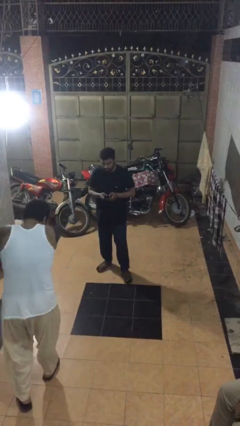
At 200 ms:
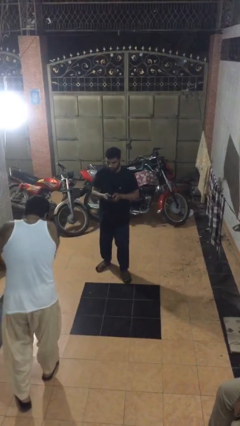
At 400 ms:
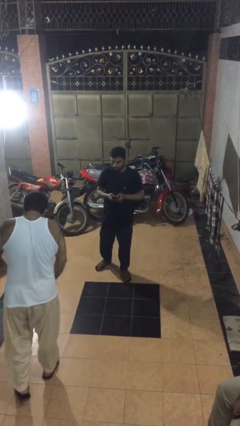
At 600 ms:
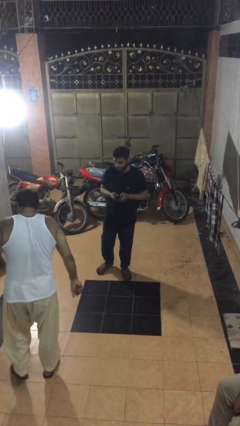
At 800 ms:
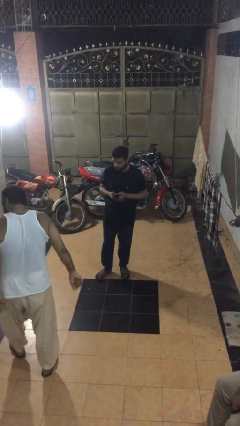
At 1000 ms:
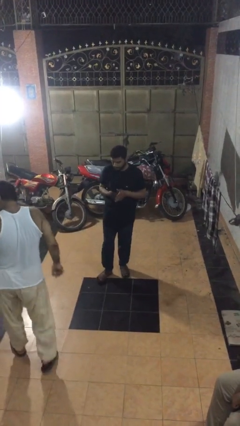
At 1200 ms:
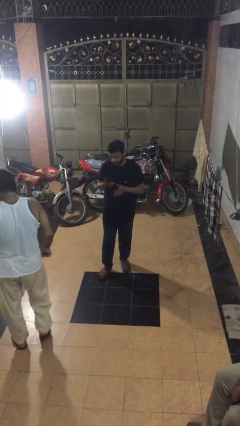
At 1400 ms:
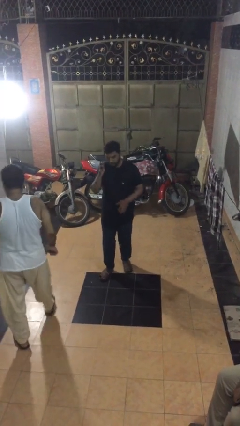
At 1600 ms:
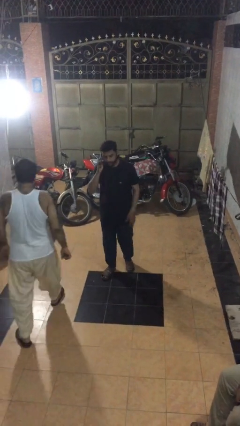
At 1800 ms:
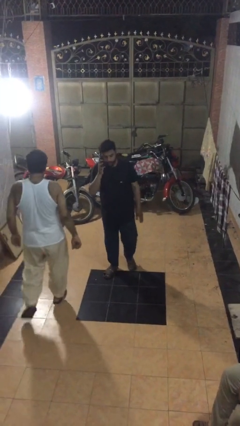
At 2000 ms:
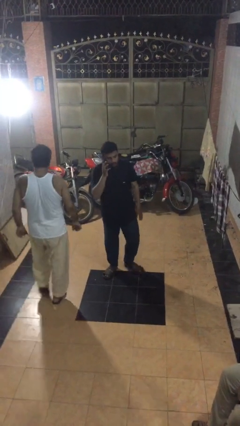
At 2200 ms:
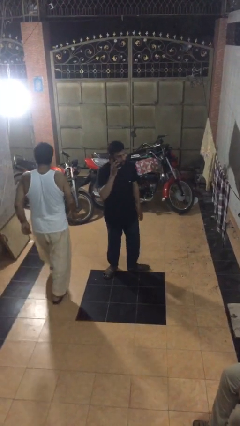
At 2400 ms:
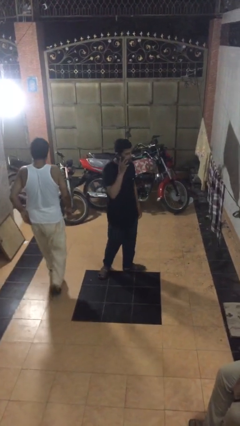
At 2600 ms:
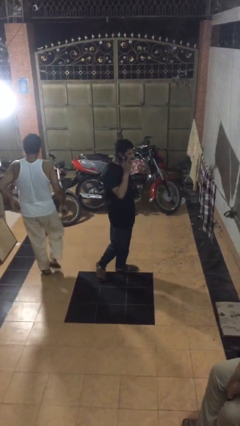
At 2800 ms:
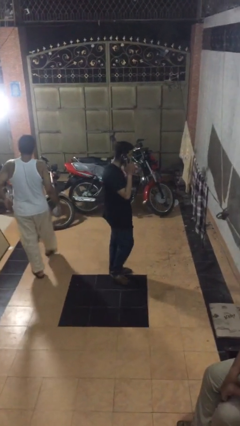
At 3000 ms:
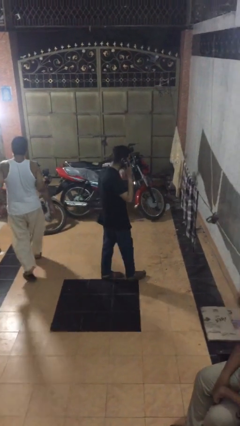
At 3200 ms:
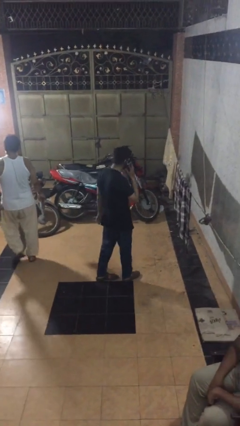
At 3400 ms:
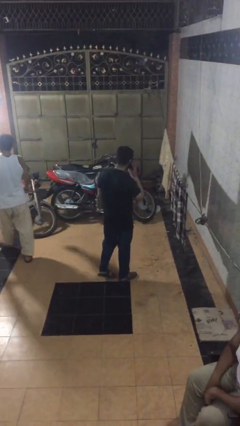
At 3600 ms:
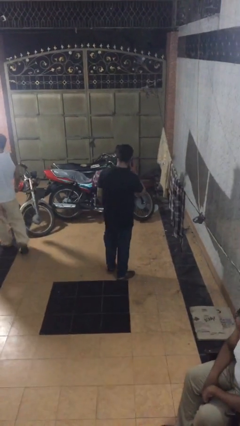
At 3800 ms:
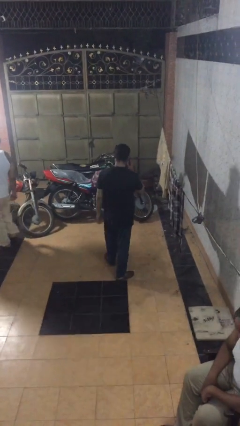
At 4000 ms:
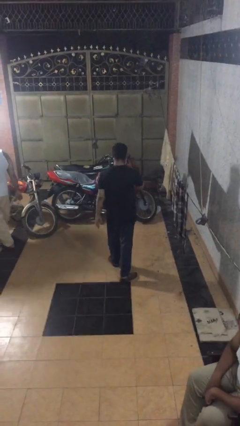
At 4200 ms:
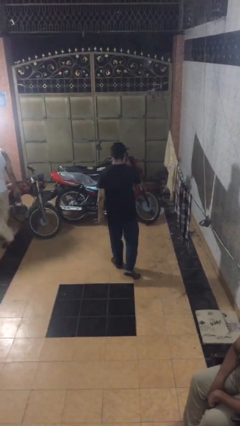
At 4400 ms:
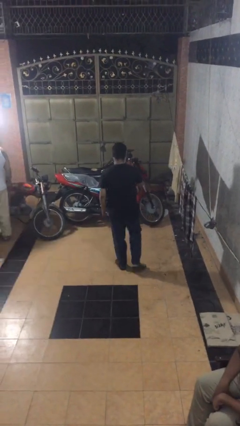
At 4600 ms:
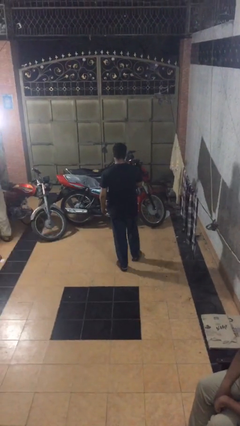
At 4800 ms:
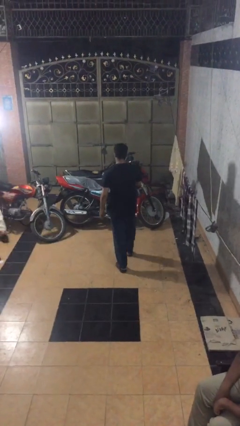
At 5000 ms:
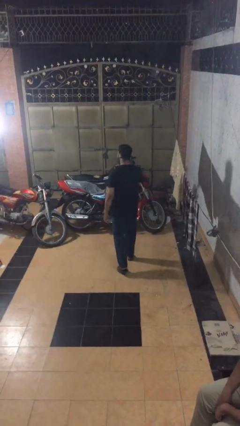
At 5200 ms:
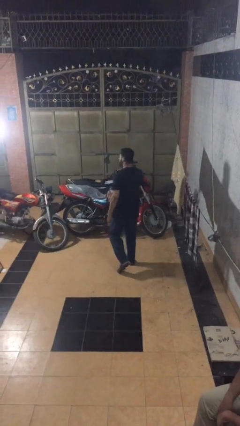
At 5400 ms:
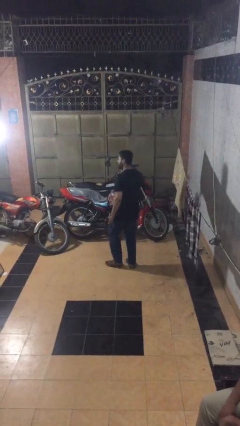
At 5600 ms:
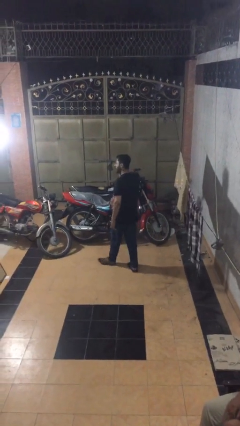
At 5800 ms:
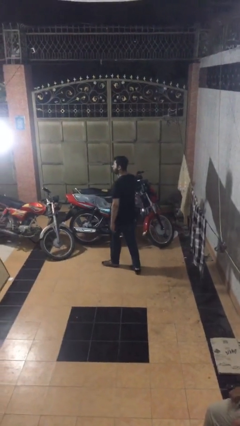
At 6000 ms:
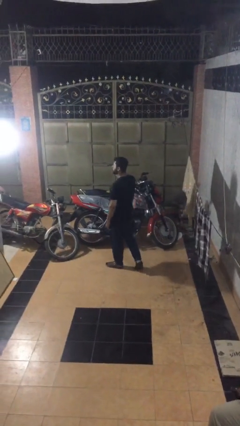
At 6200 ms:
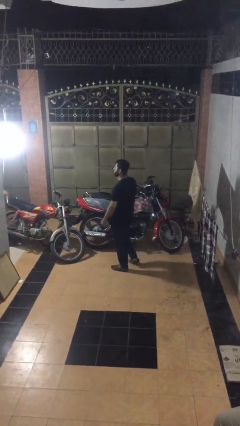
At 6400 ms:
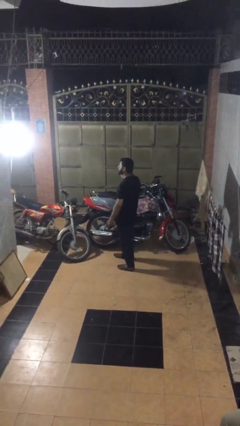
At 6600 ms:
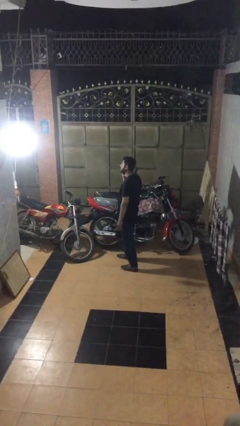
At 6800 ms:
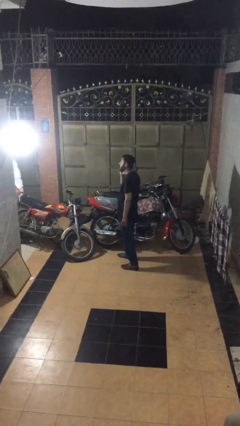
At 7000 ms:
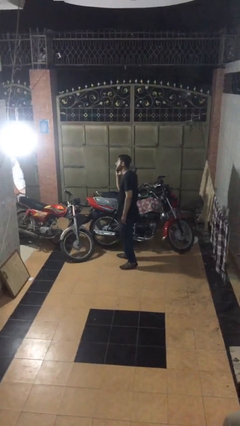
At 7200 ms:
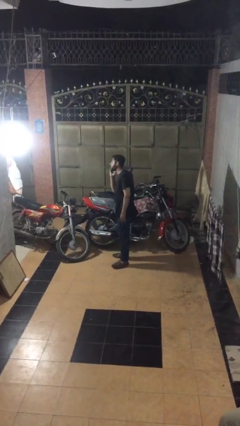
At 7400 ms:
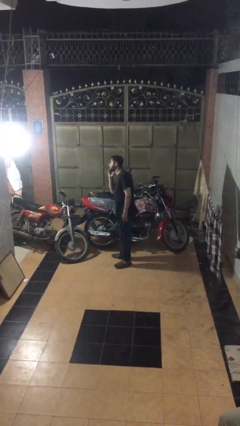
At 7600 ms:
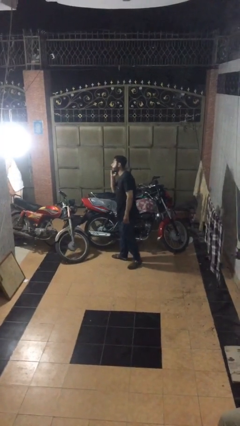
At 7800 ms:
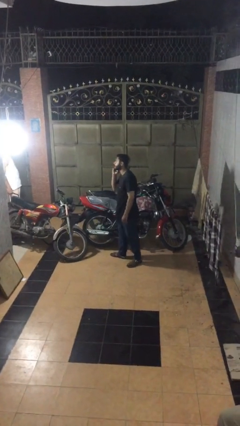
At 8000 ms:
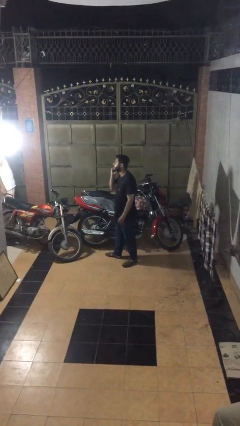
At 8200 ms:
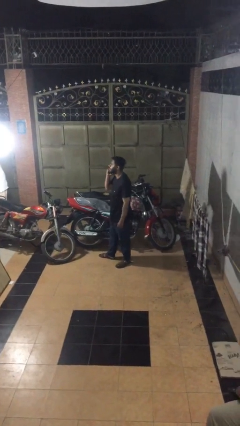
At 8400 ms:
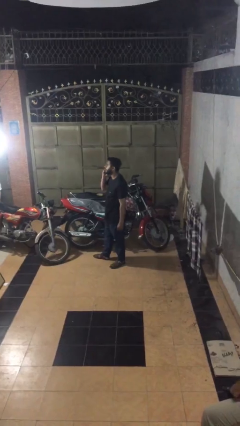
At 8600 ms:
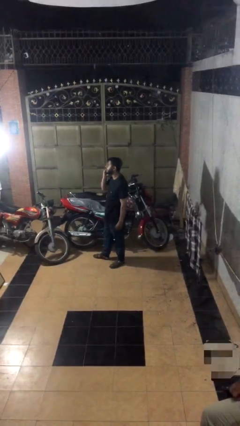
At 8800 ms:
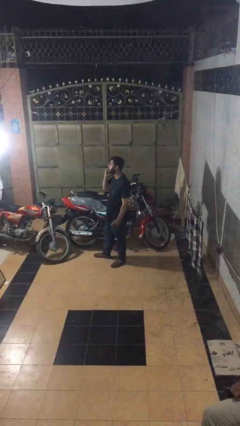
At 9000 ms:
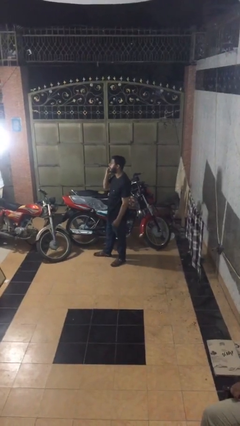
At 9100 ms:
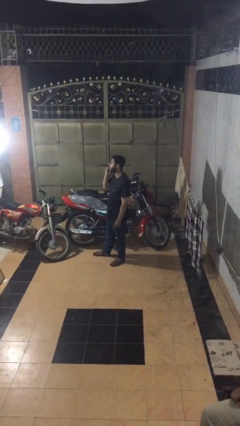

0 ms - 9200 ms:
person talks on phone

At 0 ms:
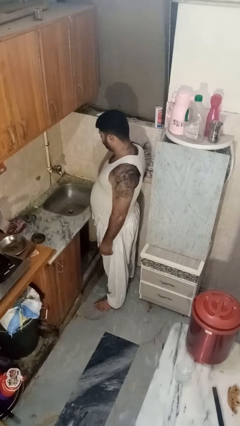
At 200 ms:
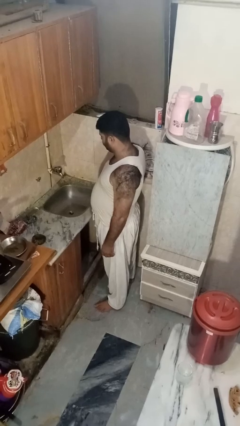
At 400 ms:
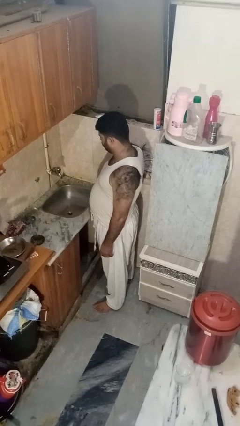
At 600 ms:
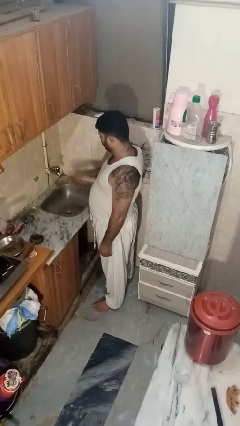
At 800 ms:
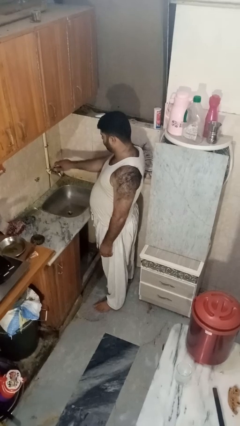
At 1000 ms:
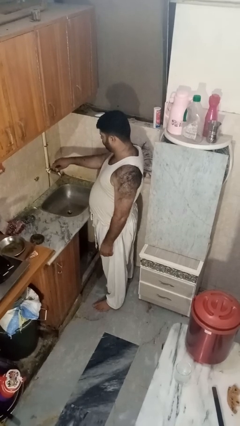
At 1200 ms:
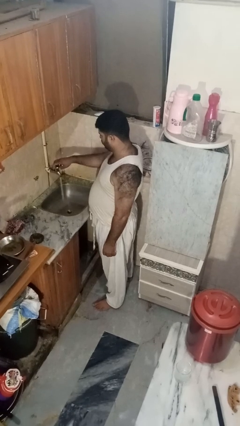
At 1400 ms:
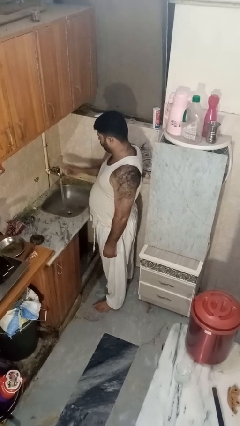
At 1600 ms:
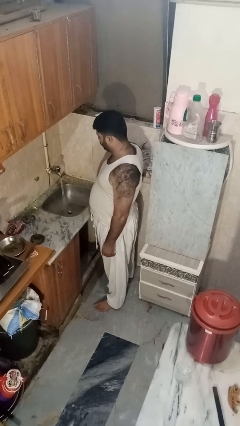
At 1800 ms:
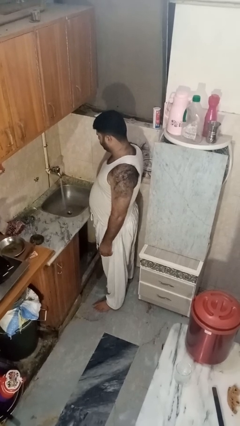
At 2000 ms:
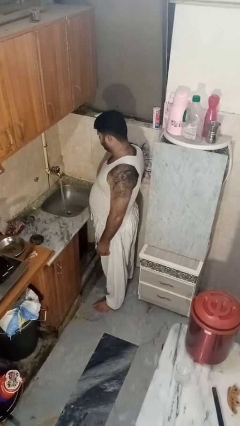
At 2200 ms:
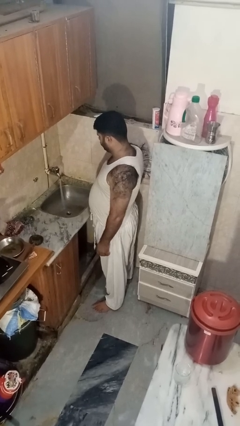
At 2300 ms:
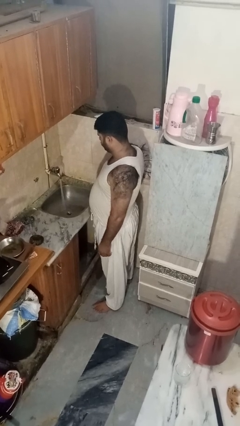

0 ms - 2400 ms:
person turns on faucet

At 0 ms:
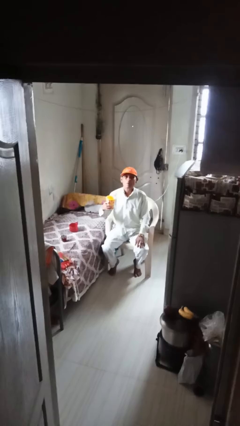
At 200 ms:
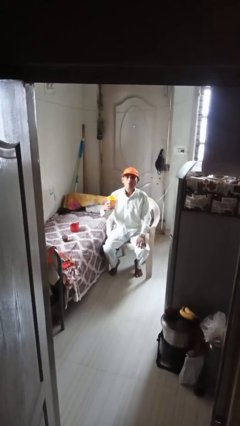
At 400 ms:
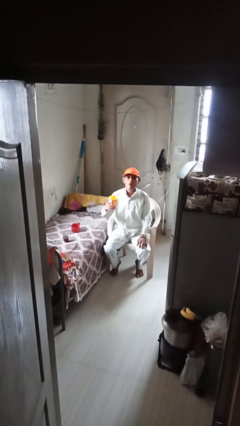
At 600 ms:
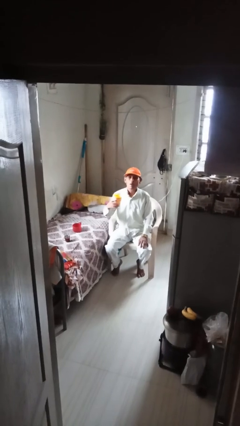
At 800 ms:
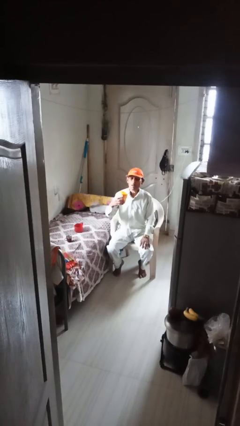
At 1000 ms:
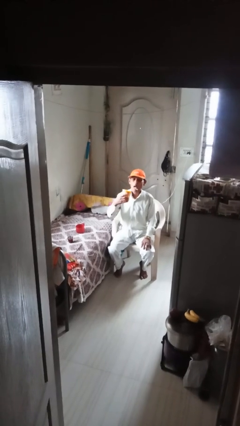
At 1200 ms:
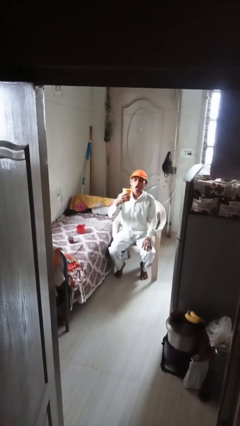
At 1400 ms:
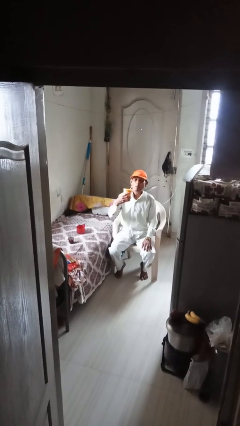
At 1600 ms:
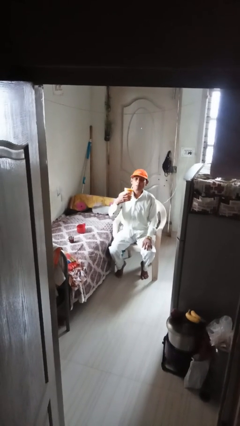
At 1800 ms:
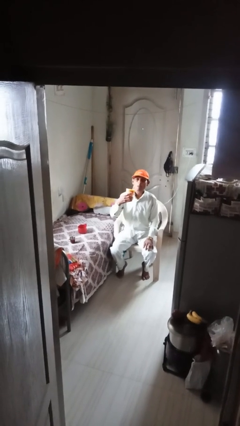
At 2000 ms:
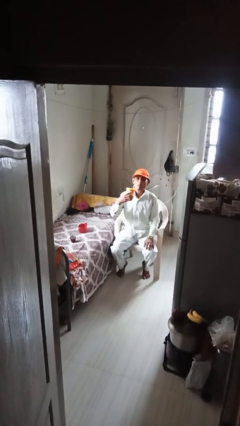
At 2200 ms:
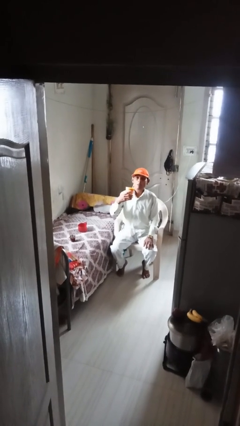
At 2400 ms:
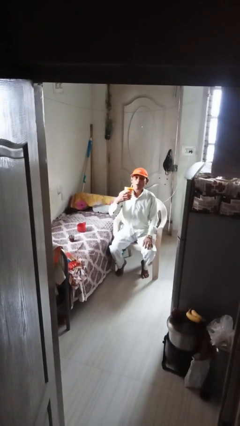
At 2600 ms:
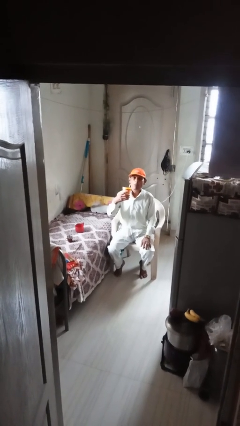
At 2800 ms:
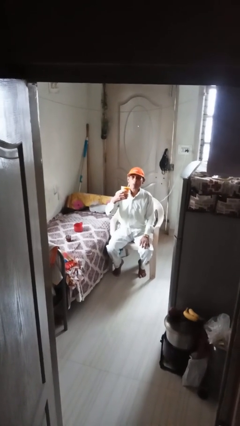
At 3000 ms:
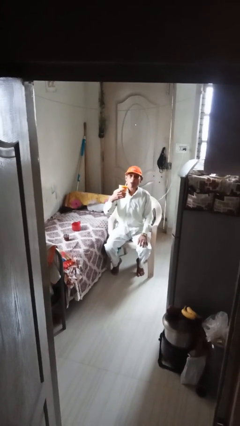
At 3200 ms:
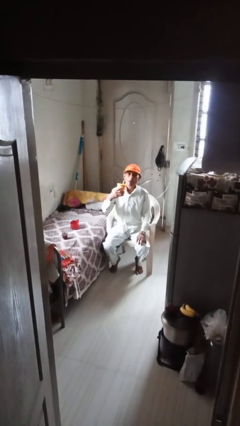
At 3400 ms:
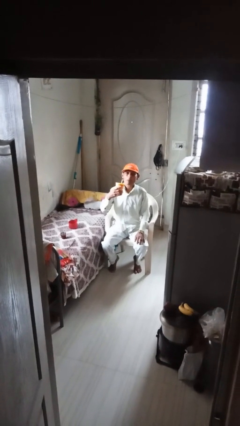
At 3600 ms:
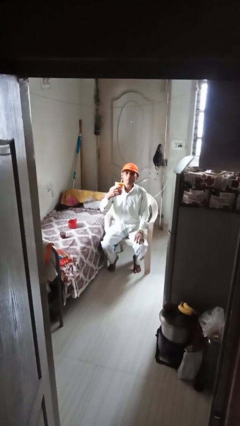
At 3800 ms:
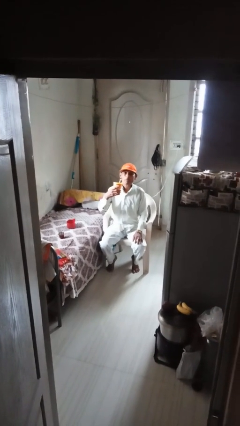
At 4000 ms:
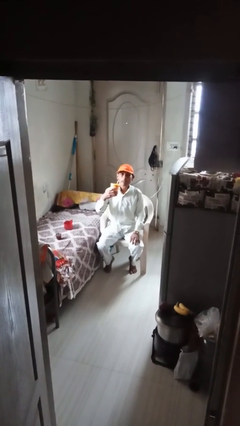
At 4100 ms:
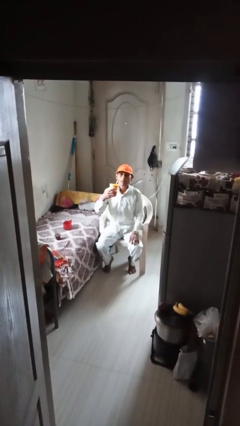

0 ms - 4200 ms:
person drinks from straw

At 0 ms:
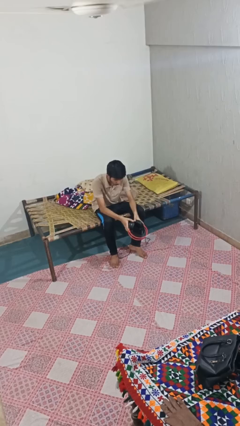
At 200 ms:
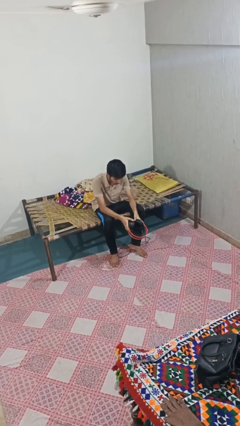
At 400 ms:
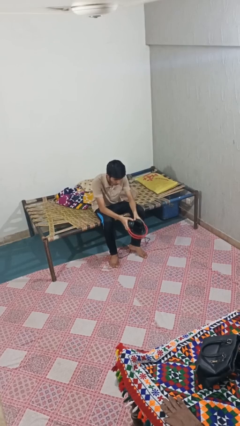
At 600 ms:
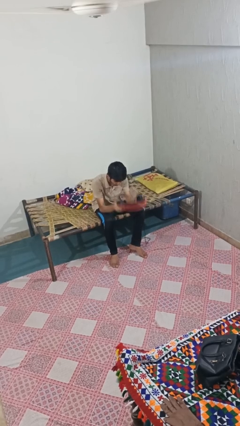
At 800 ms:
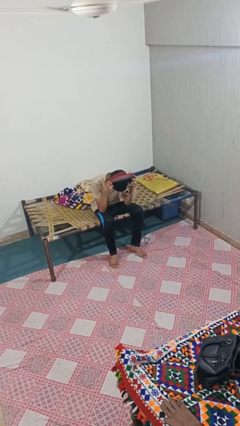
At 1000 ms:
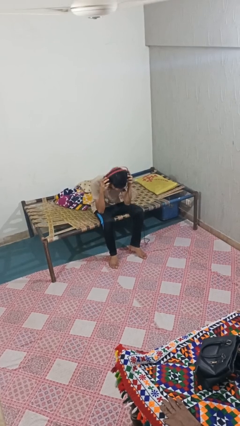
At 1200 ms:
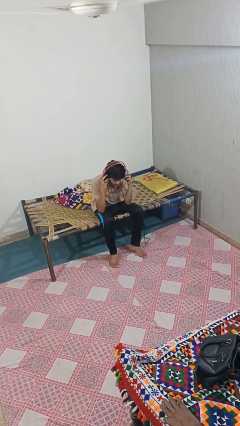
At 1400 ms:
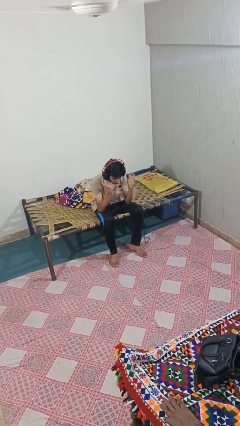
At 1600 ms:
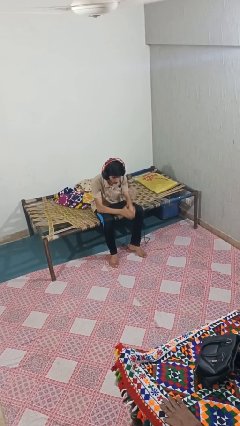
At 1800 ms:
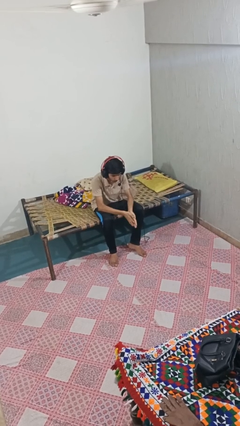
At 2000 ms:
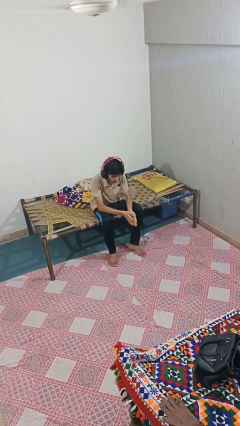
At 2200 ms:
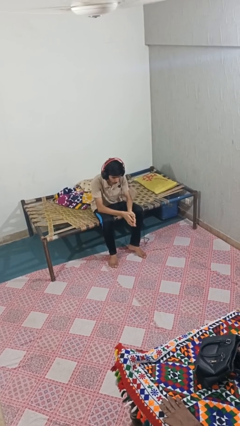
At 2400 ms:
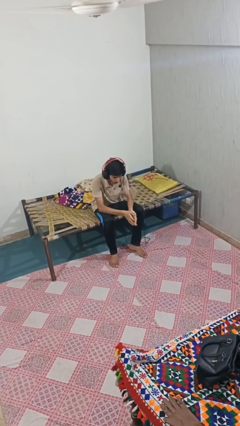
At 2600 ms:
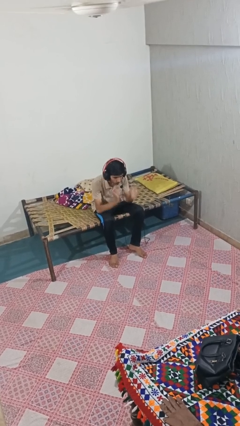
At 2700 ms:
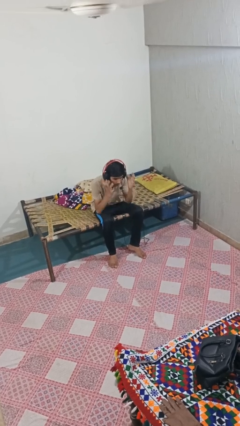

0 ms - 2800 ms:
person puts on headphones
